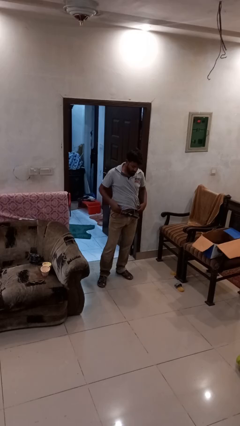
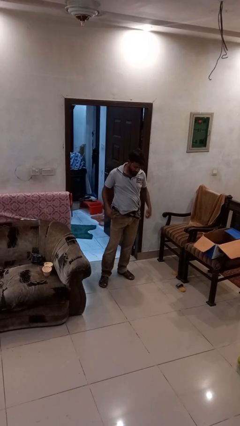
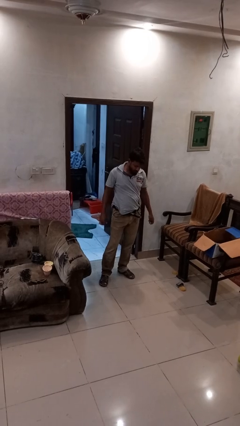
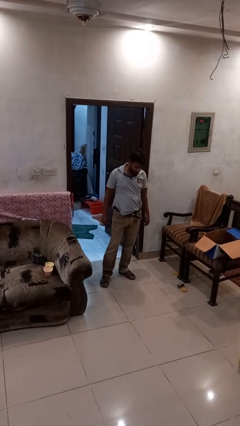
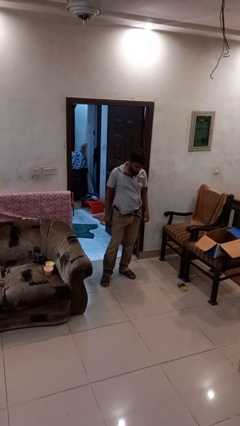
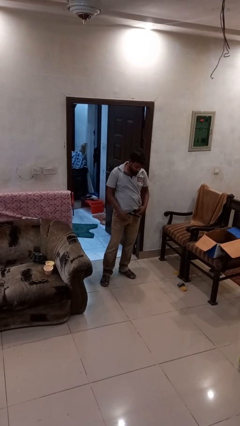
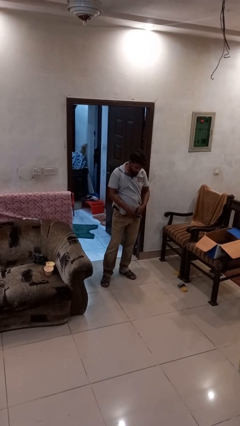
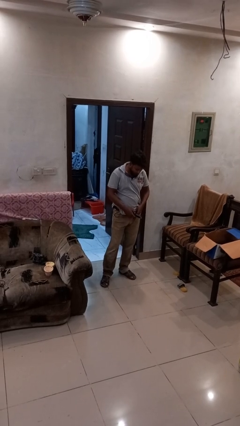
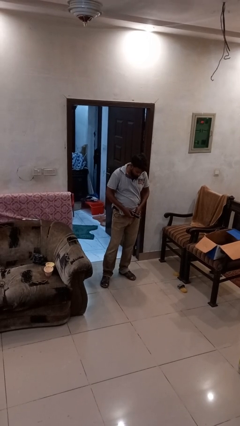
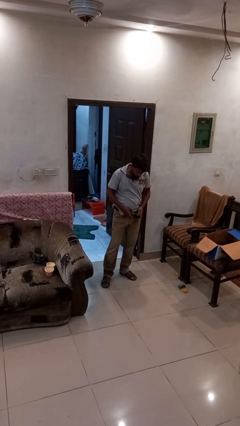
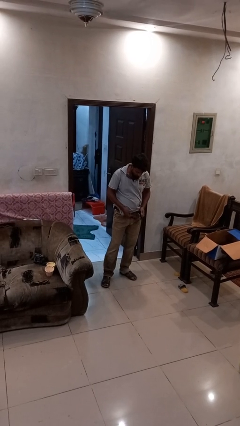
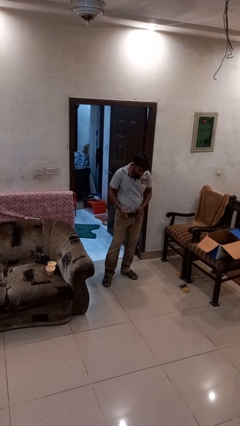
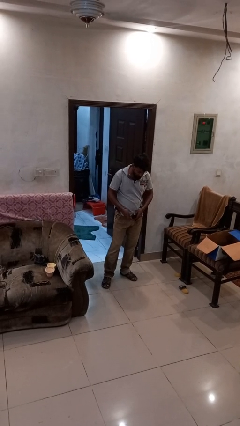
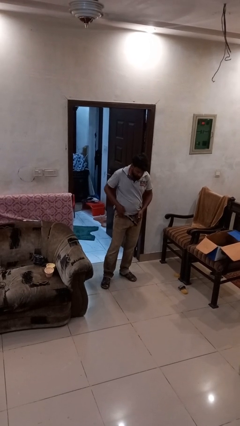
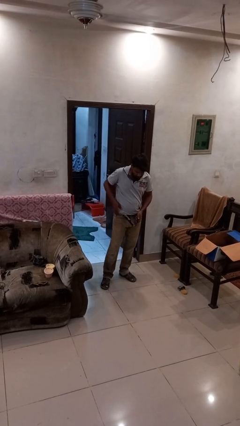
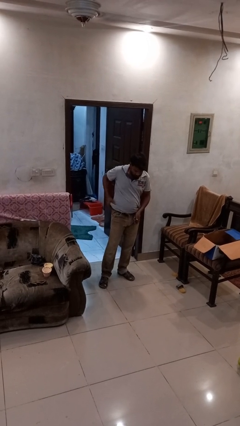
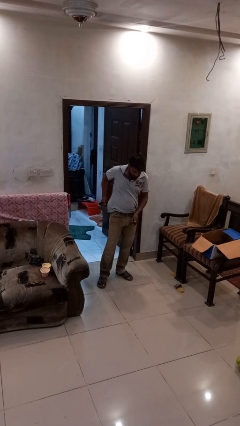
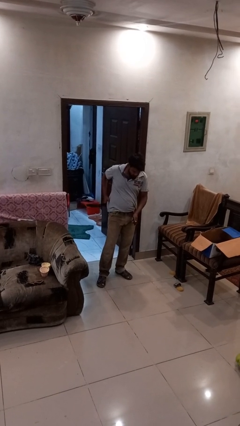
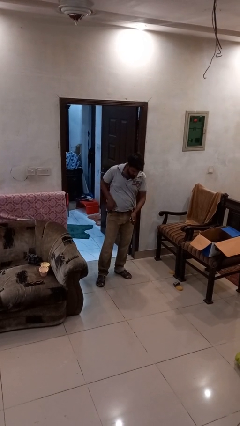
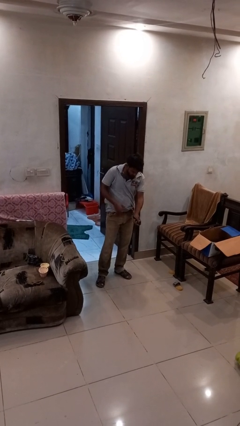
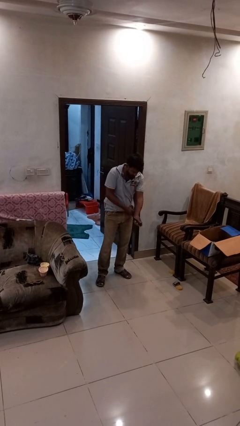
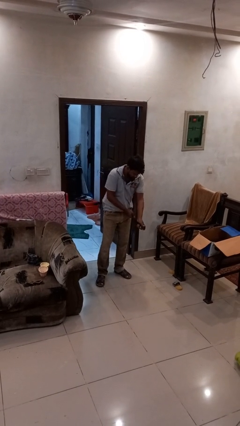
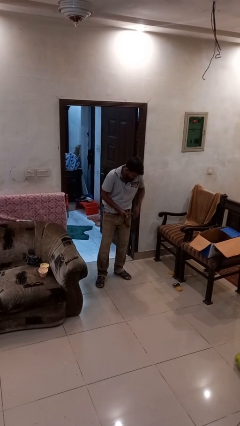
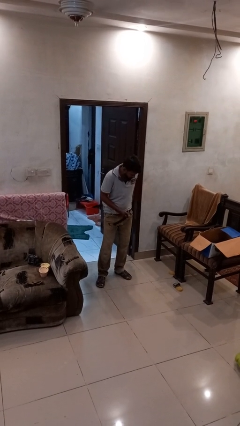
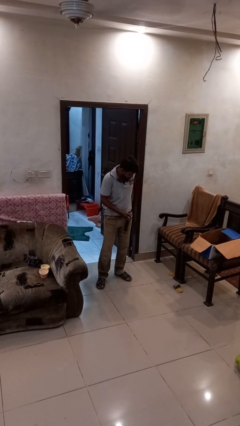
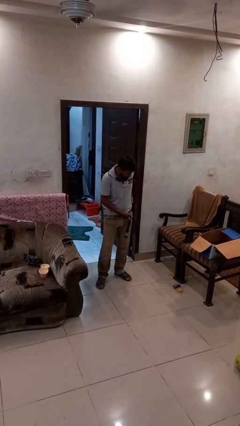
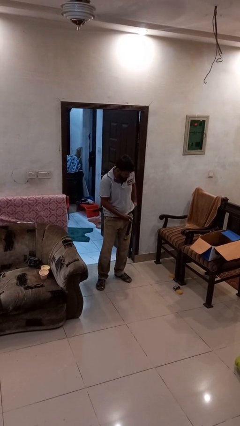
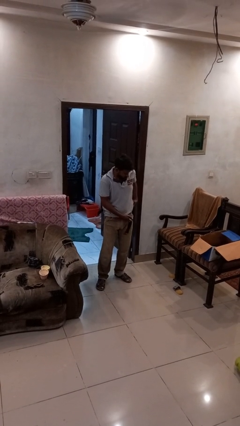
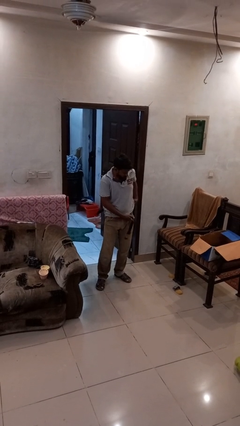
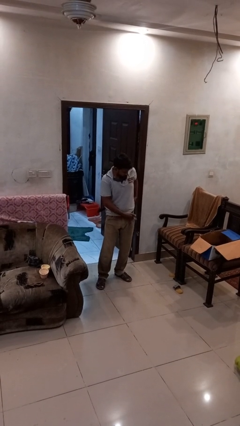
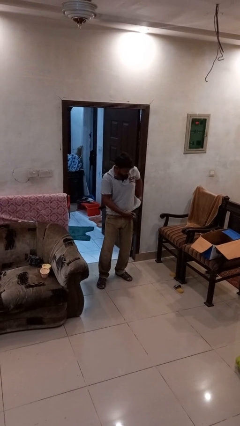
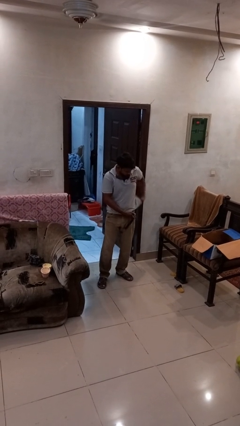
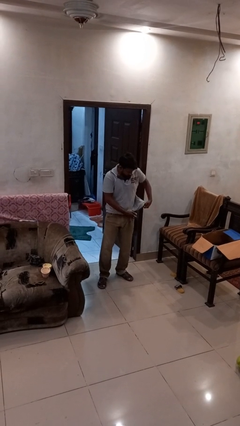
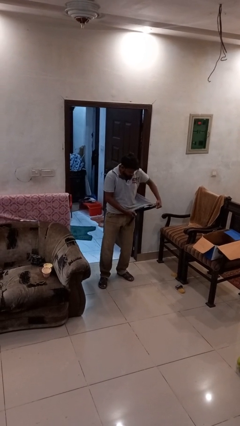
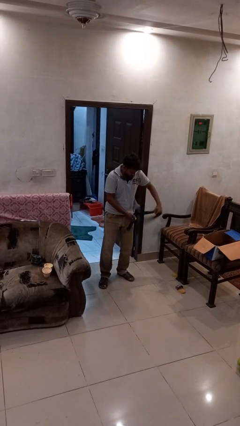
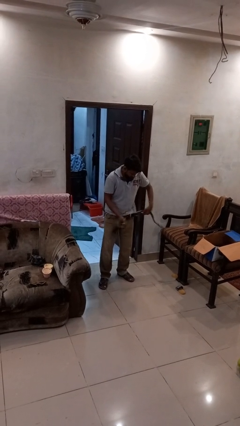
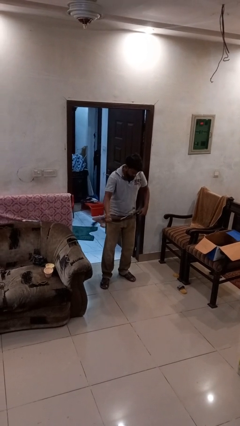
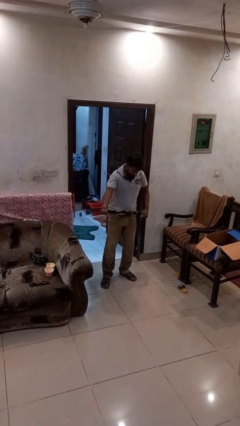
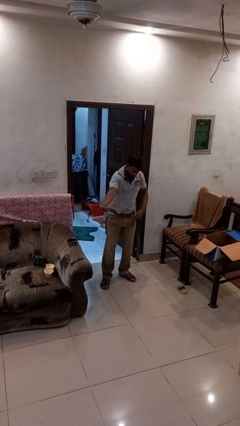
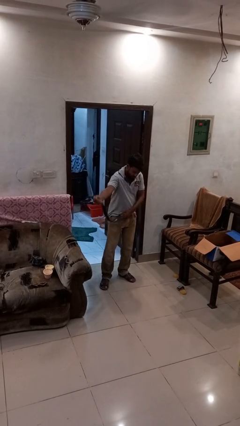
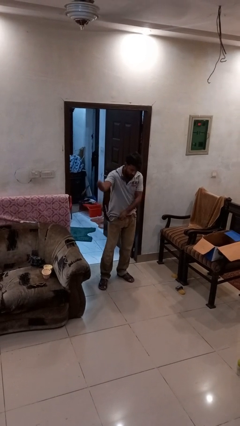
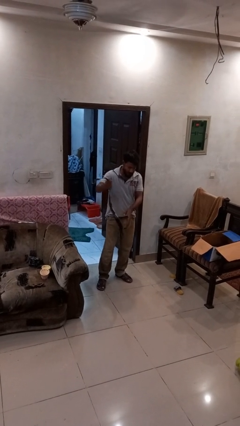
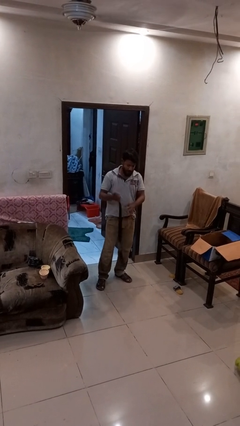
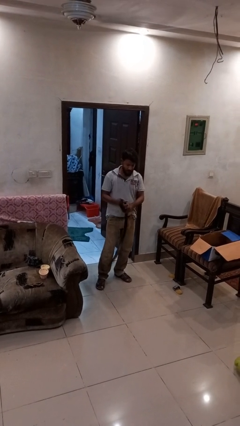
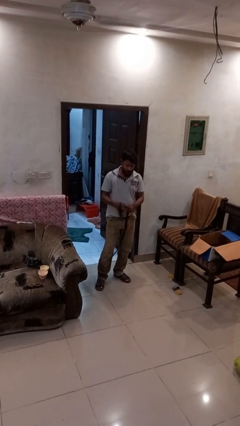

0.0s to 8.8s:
person takes off belt

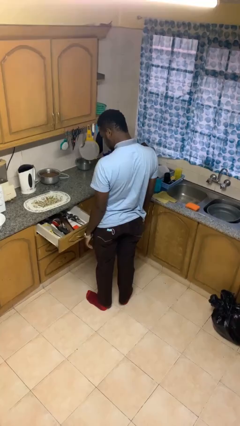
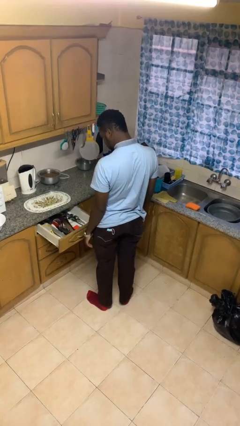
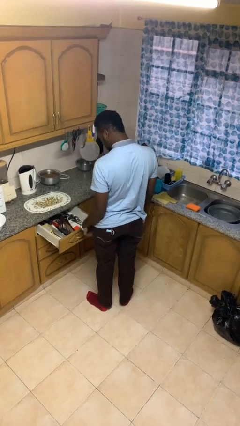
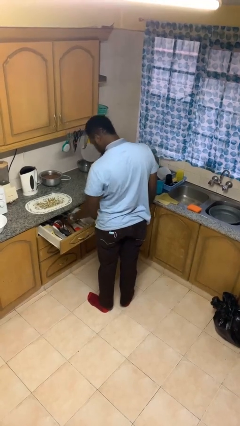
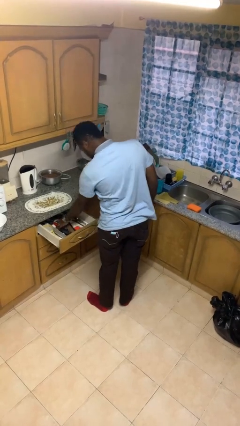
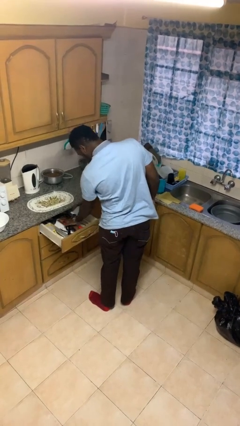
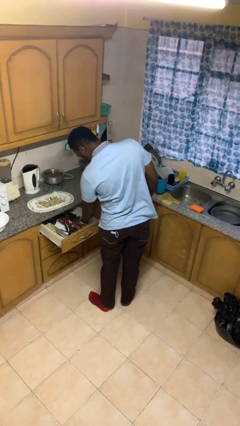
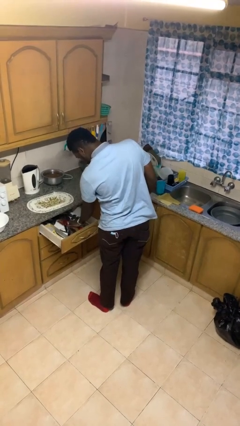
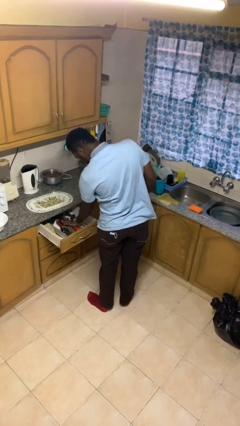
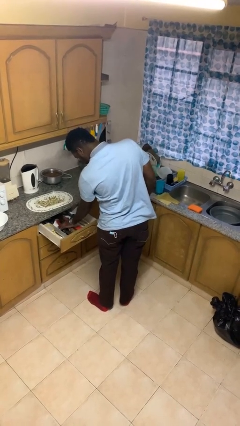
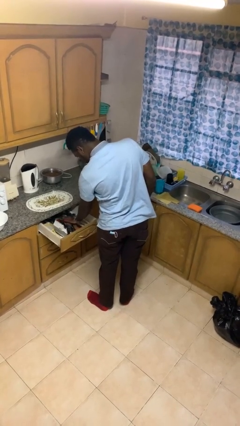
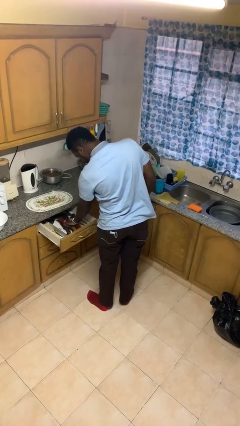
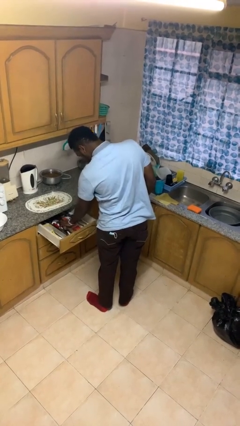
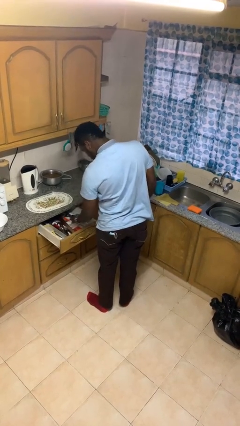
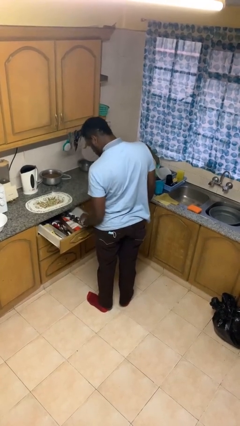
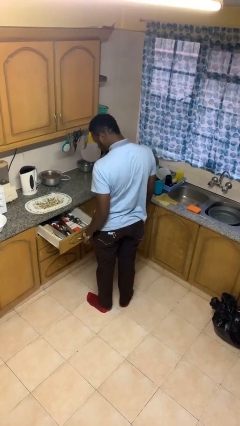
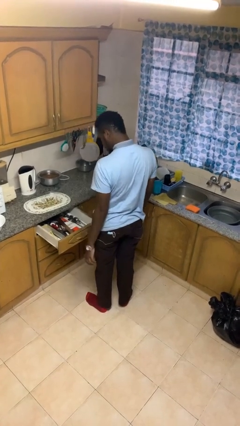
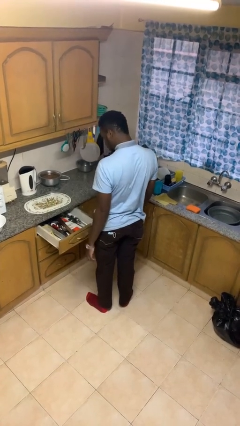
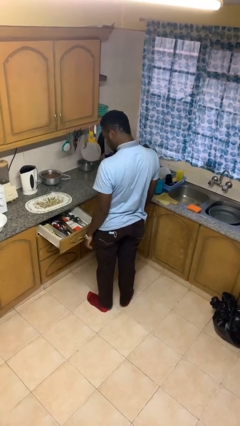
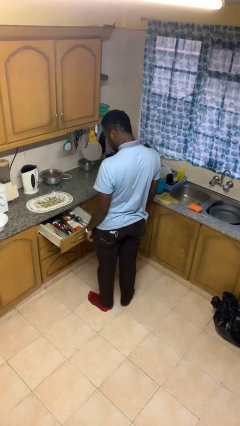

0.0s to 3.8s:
person searches in kitchen drawer

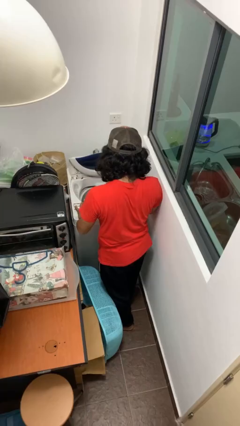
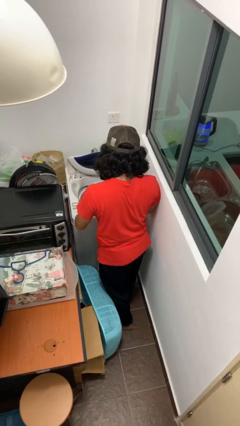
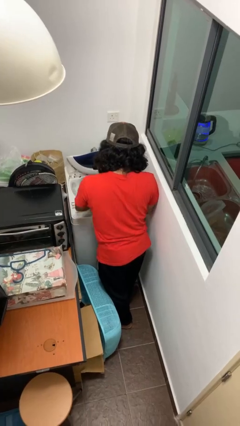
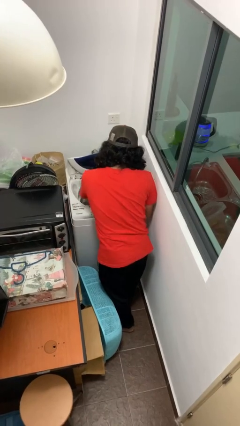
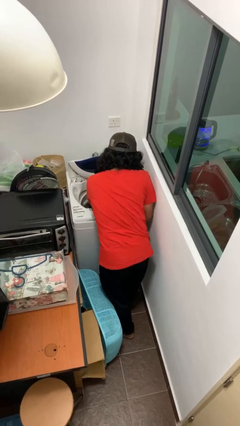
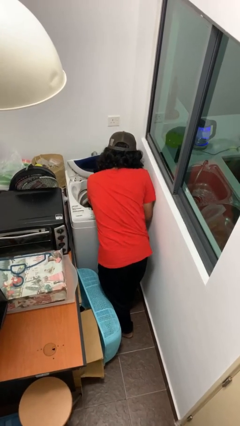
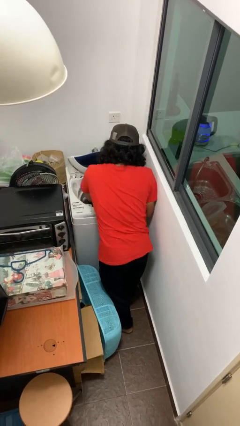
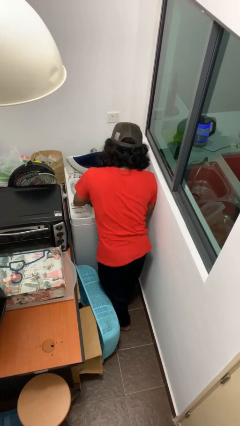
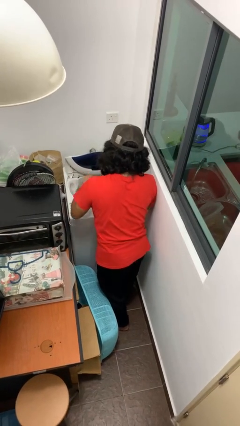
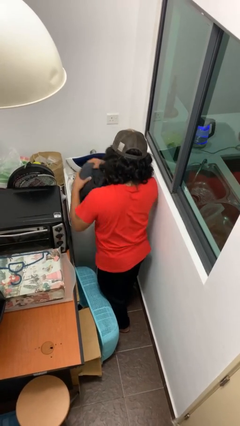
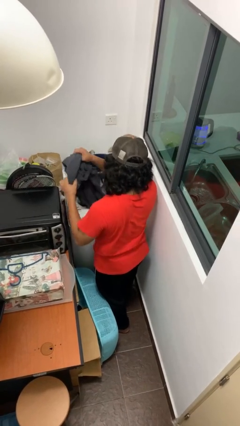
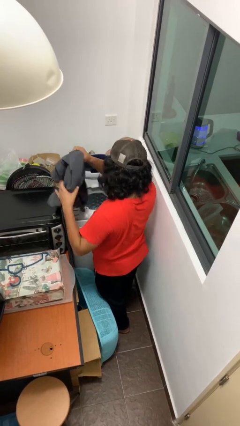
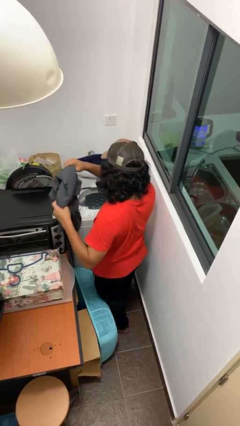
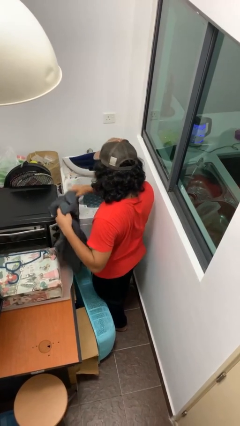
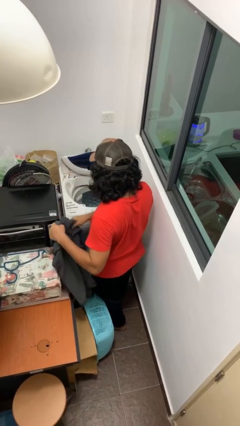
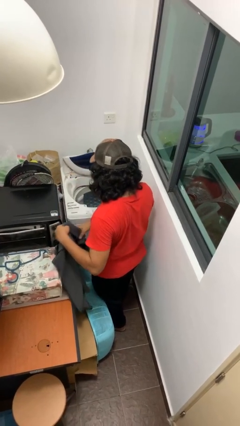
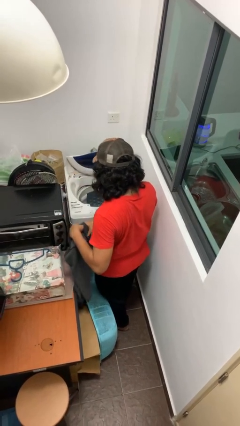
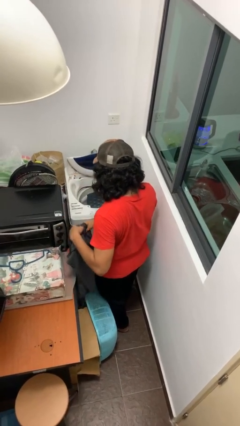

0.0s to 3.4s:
person unloads clotheswasher

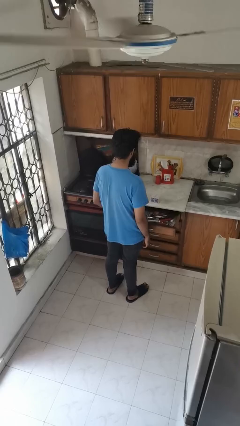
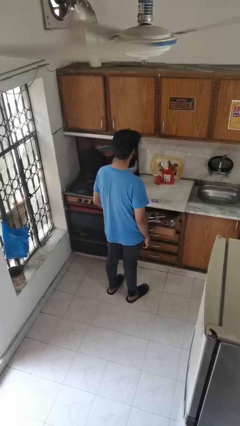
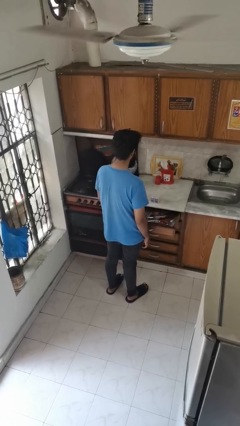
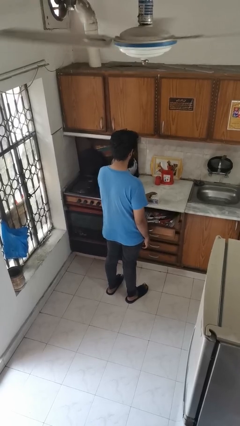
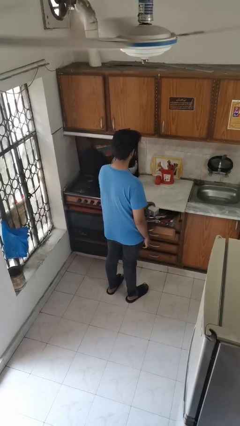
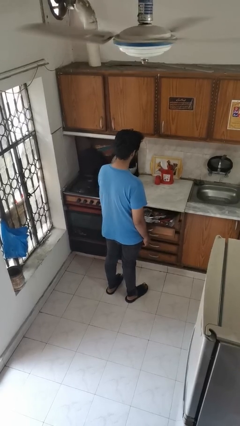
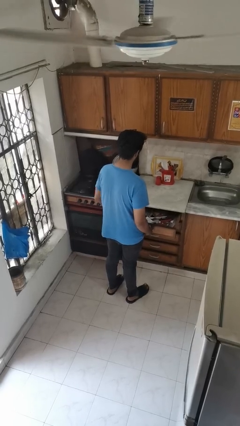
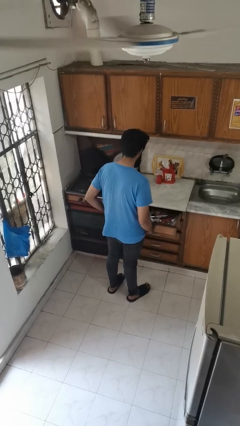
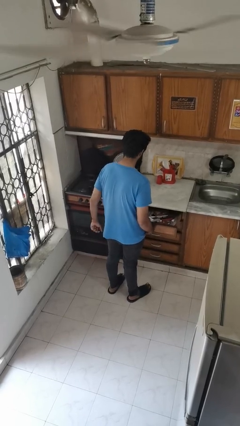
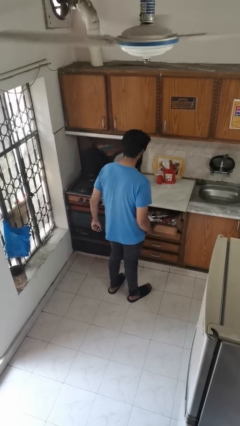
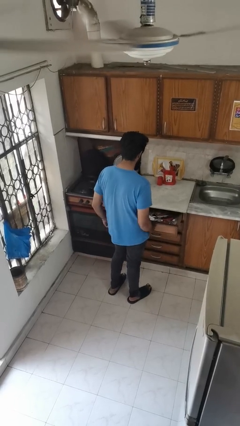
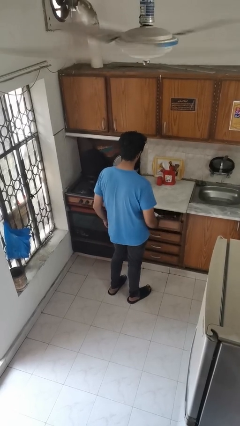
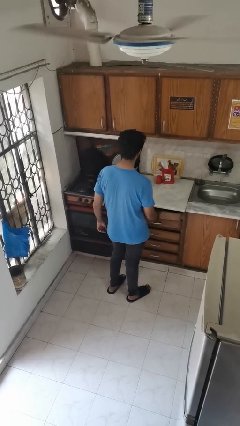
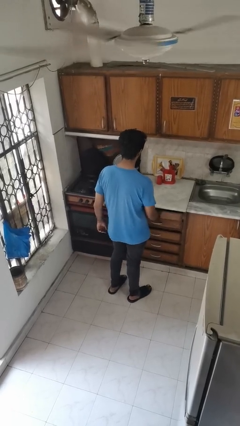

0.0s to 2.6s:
person puts object into kitchen drawer
